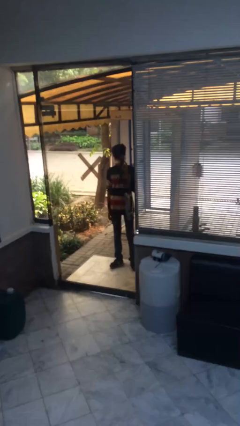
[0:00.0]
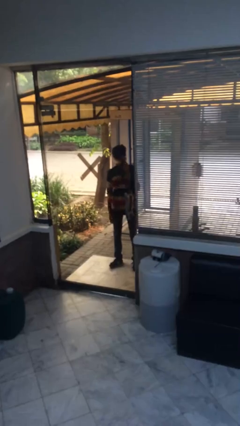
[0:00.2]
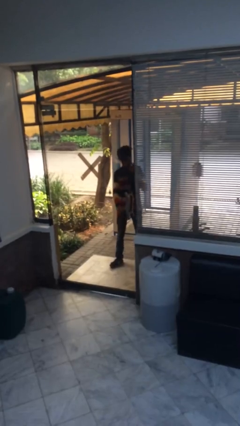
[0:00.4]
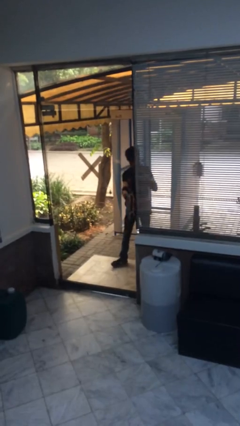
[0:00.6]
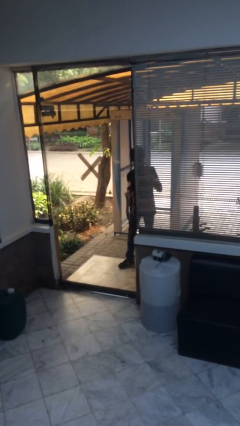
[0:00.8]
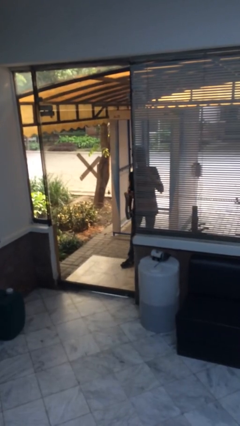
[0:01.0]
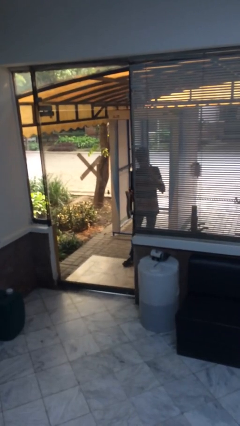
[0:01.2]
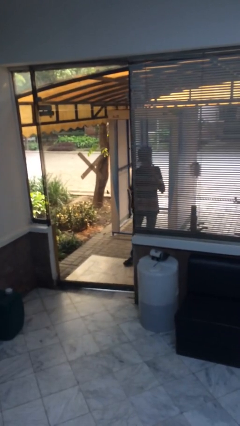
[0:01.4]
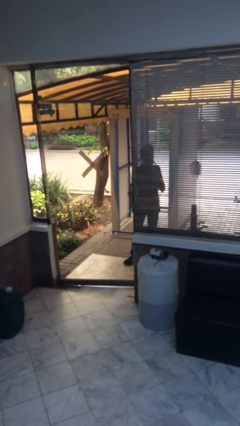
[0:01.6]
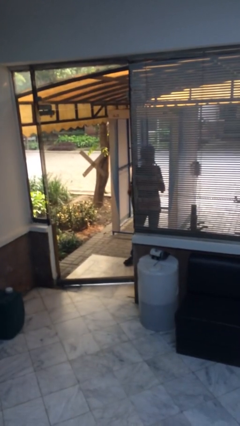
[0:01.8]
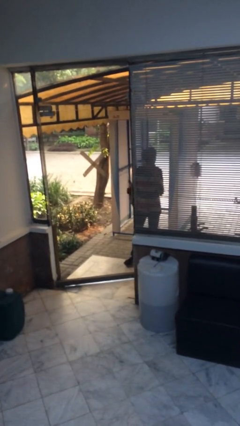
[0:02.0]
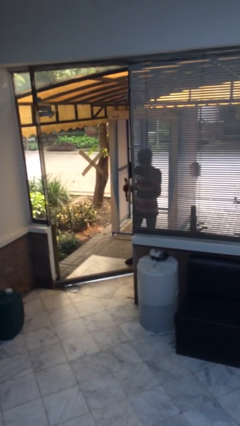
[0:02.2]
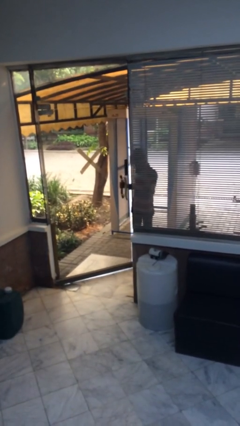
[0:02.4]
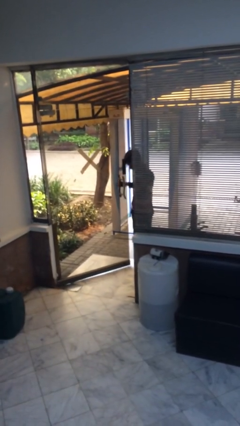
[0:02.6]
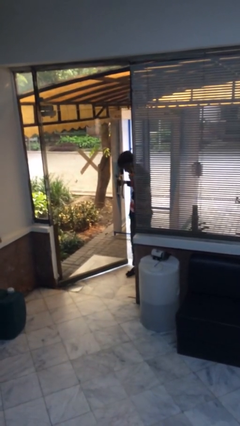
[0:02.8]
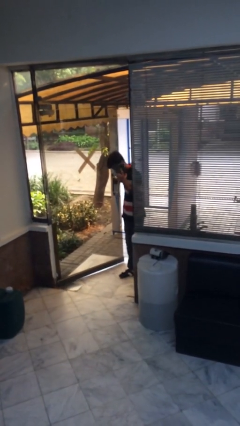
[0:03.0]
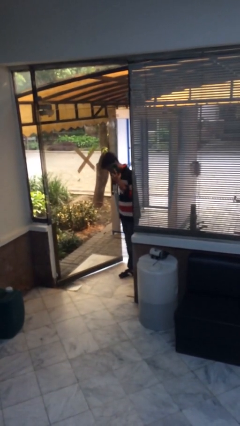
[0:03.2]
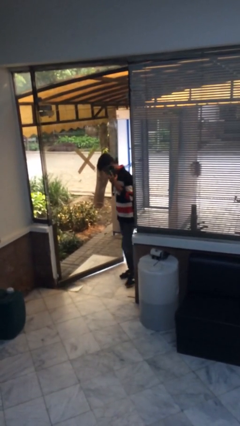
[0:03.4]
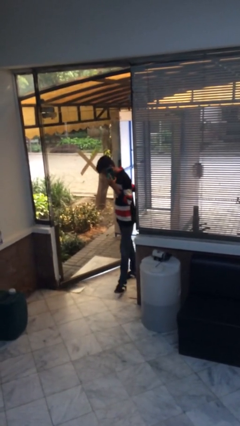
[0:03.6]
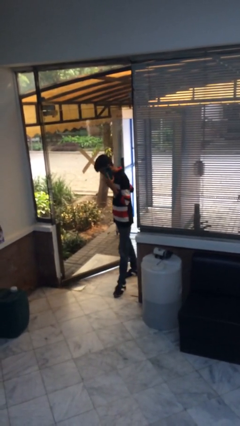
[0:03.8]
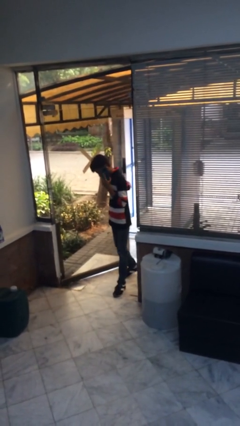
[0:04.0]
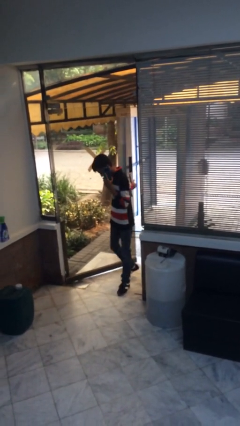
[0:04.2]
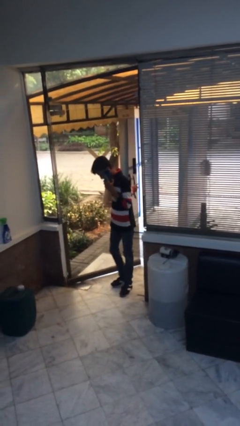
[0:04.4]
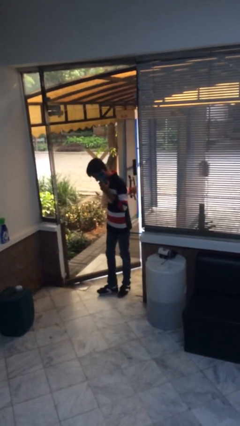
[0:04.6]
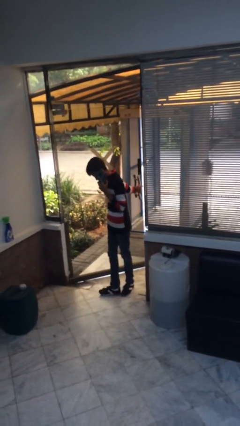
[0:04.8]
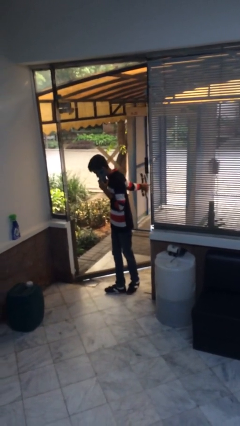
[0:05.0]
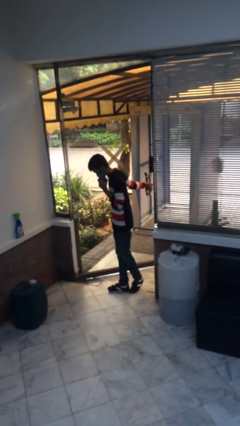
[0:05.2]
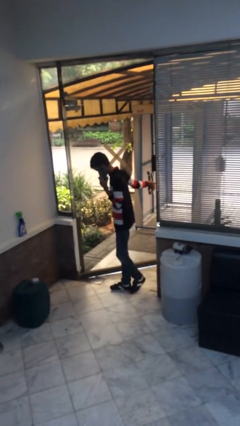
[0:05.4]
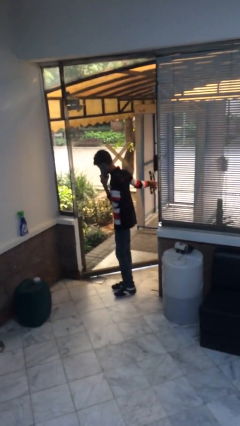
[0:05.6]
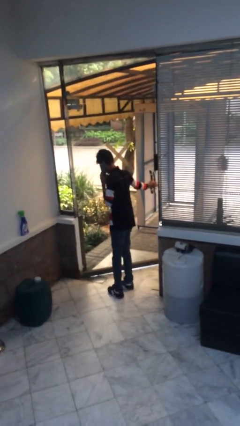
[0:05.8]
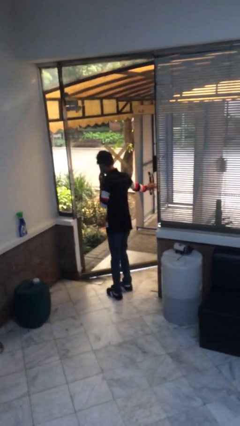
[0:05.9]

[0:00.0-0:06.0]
person opens facility door

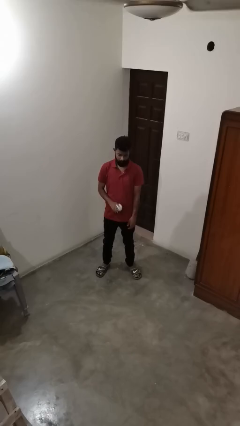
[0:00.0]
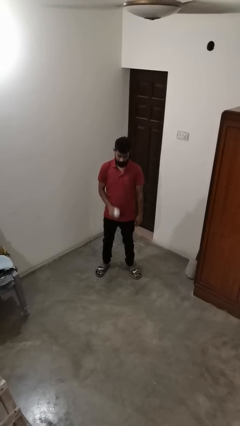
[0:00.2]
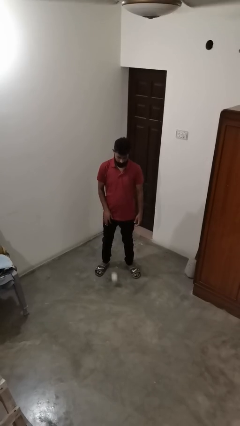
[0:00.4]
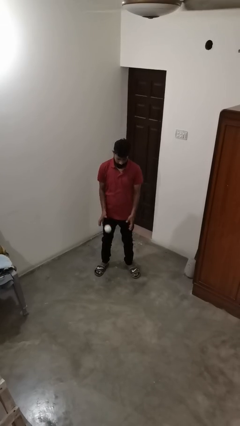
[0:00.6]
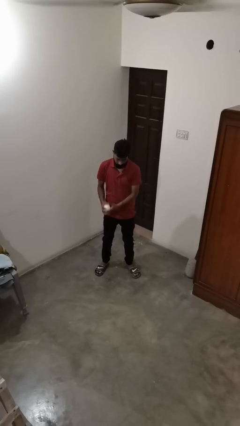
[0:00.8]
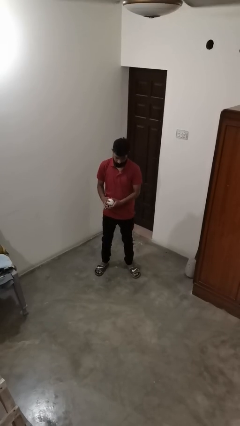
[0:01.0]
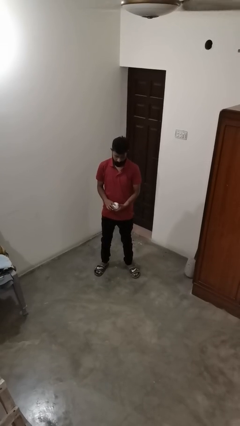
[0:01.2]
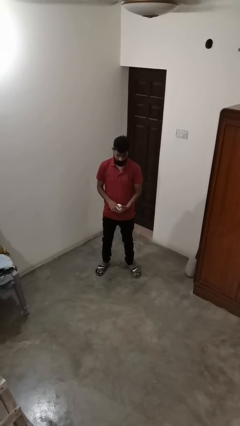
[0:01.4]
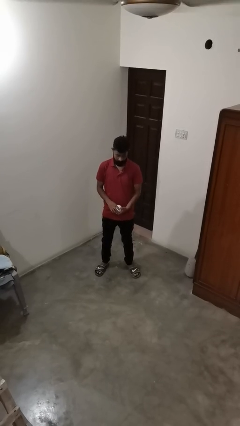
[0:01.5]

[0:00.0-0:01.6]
person bounces ball on floor

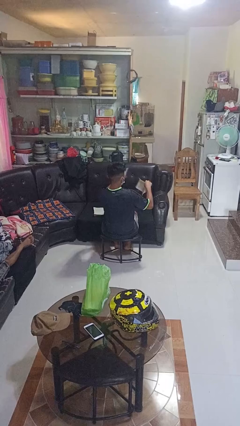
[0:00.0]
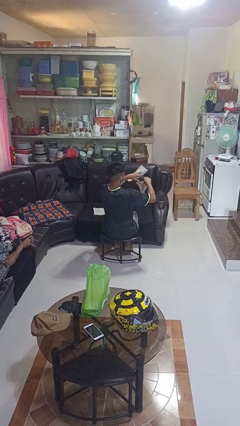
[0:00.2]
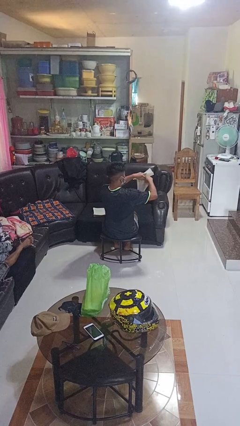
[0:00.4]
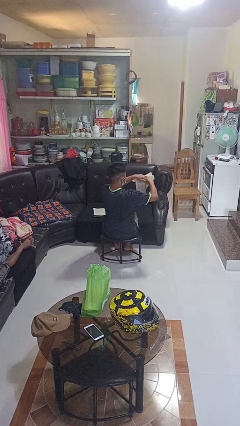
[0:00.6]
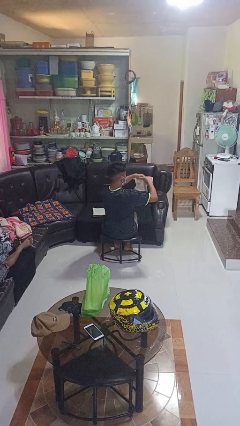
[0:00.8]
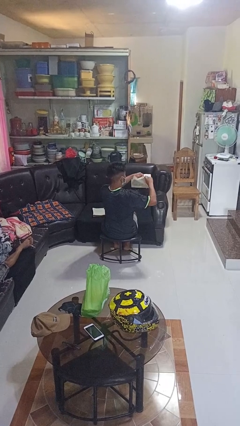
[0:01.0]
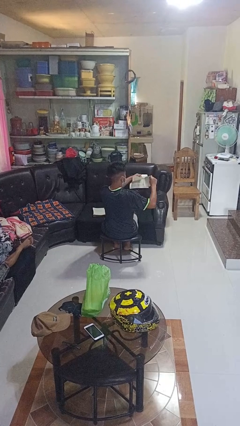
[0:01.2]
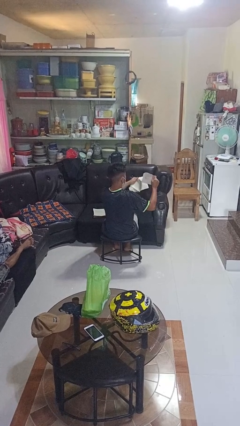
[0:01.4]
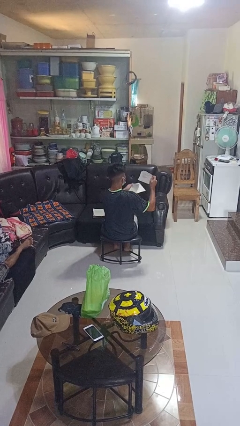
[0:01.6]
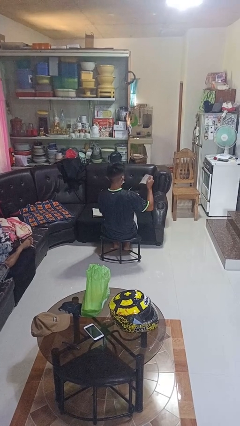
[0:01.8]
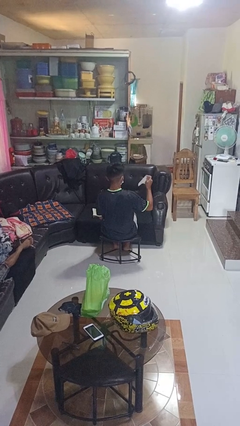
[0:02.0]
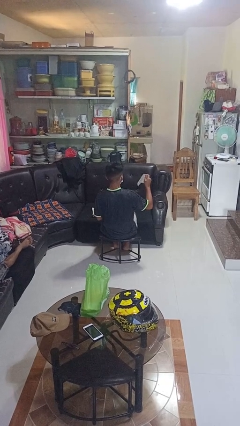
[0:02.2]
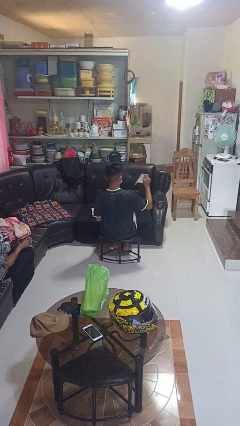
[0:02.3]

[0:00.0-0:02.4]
person tears paper

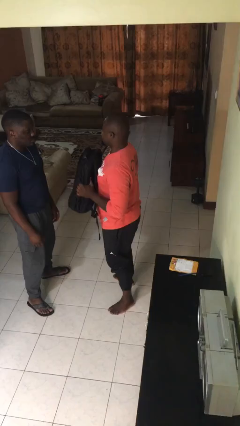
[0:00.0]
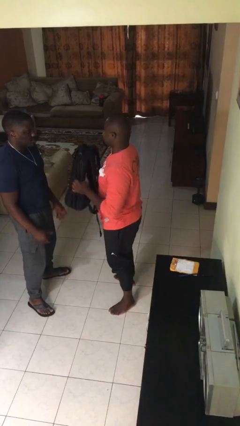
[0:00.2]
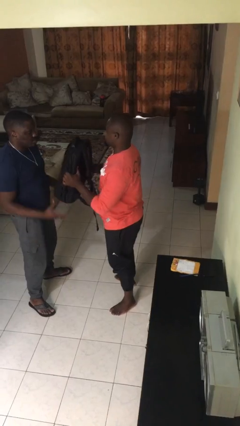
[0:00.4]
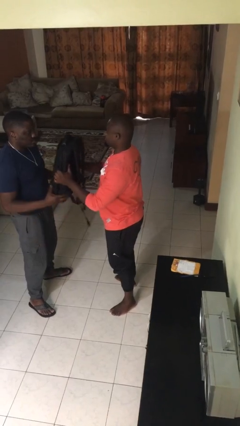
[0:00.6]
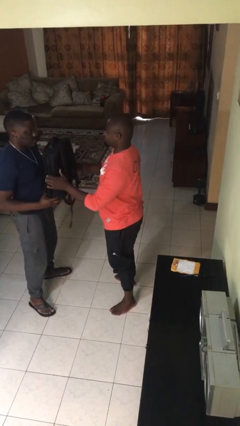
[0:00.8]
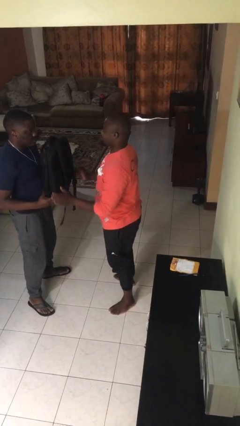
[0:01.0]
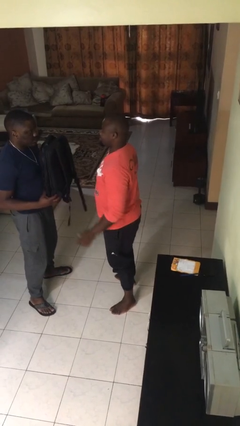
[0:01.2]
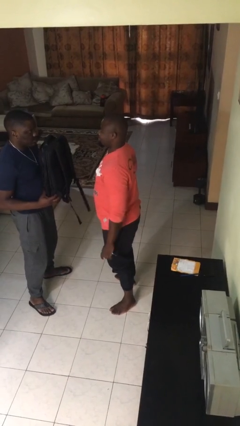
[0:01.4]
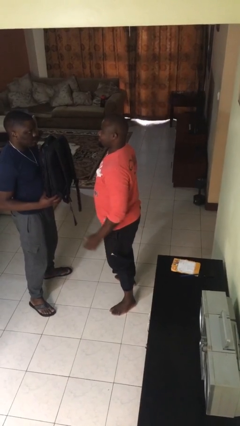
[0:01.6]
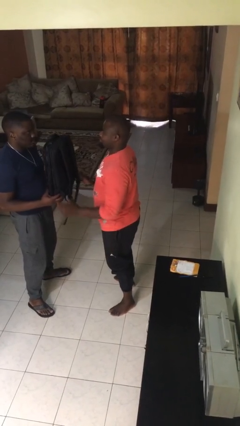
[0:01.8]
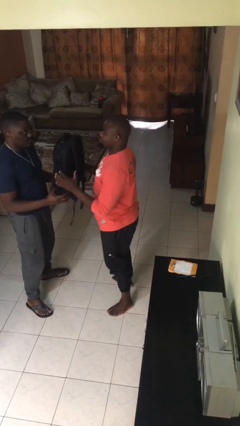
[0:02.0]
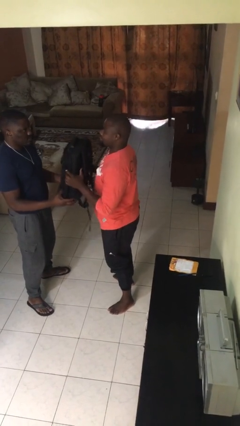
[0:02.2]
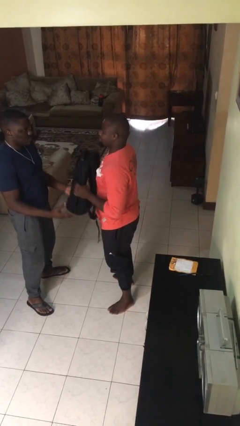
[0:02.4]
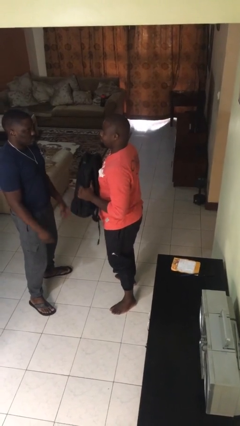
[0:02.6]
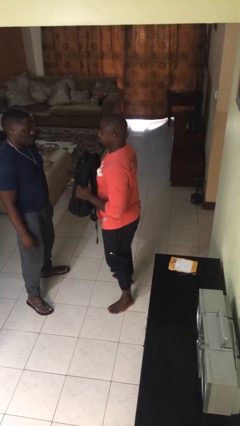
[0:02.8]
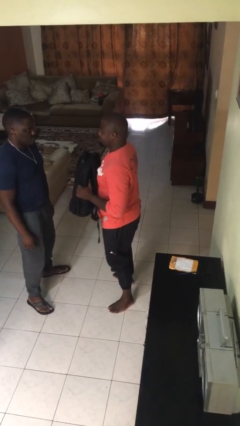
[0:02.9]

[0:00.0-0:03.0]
person transfers object to person

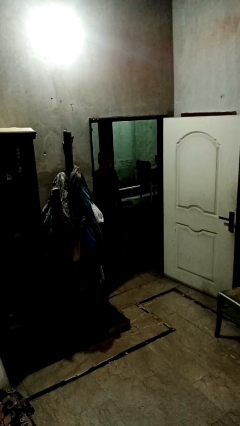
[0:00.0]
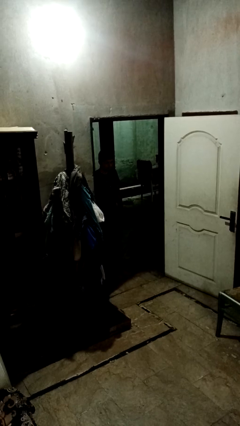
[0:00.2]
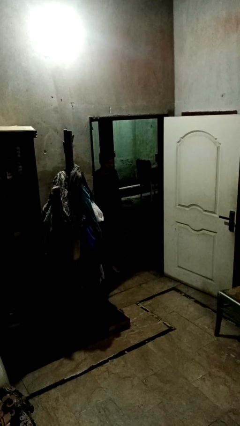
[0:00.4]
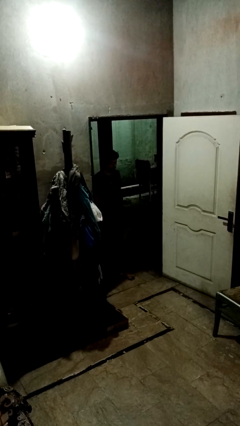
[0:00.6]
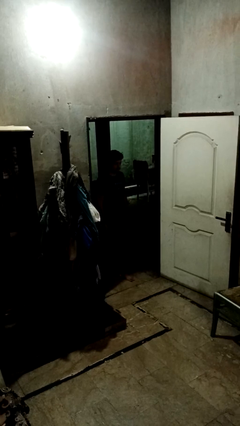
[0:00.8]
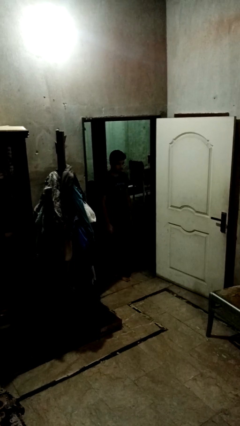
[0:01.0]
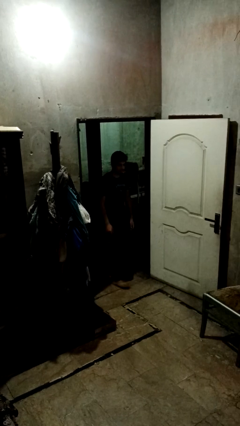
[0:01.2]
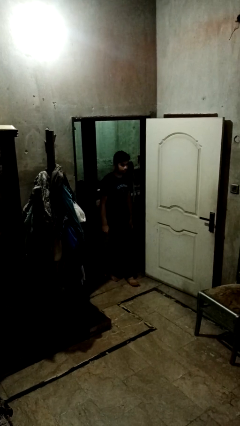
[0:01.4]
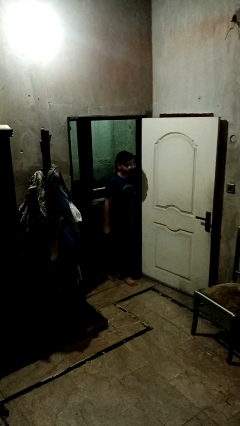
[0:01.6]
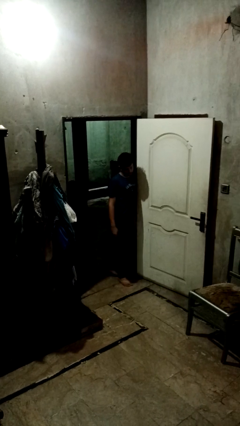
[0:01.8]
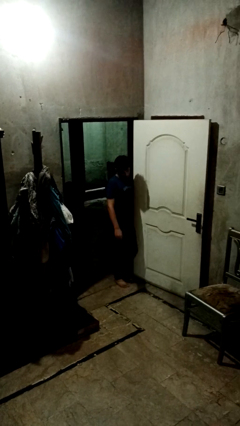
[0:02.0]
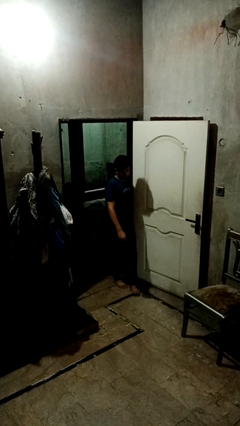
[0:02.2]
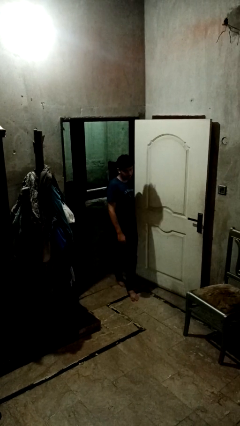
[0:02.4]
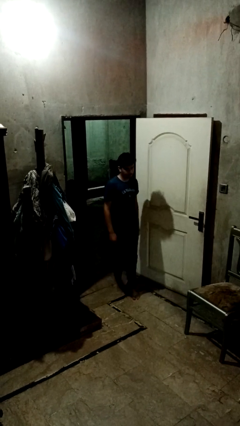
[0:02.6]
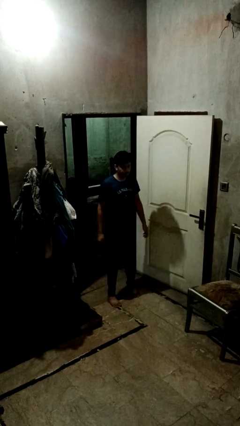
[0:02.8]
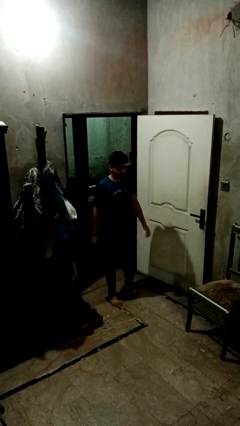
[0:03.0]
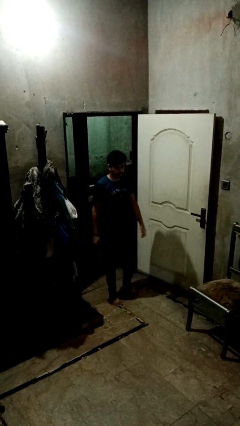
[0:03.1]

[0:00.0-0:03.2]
person bumps into wall

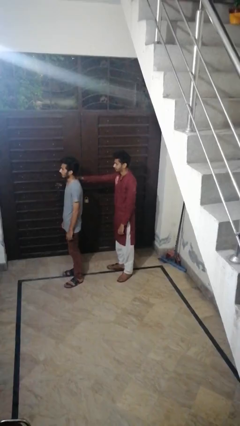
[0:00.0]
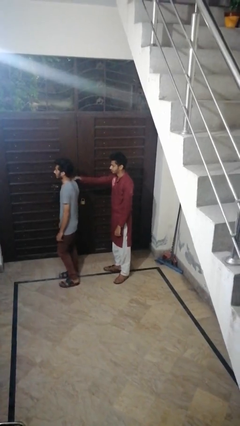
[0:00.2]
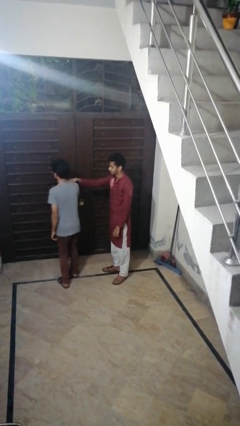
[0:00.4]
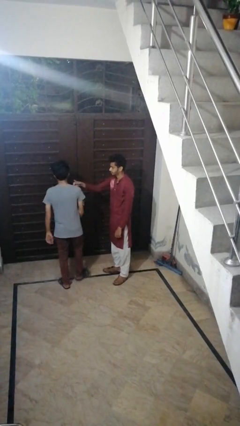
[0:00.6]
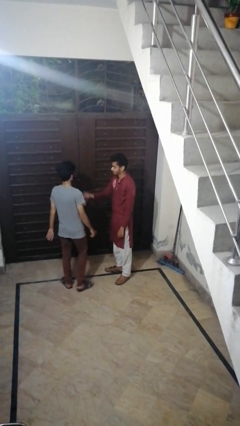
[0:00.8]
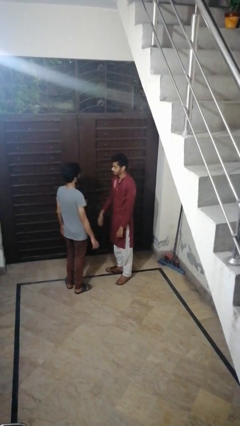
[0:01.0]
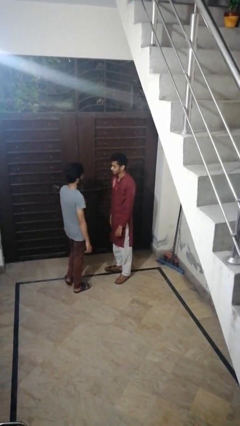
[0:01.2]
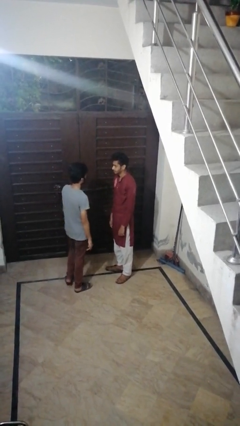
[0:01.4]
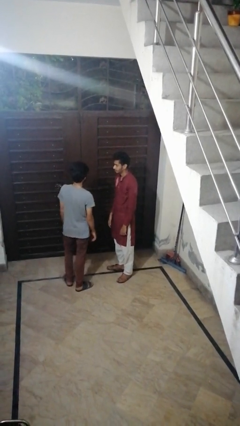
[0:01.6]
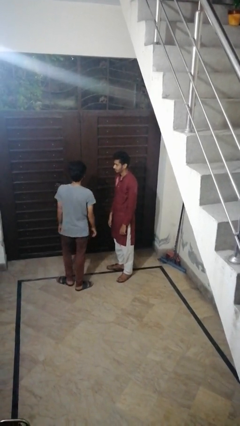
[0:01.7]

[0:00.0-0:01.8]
person spins person around
